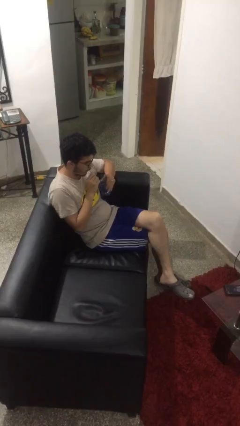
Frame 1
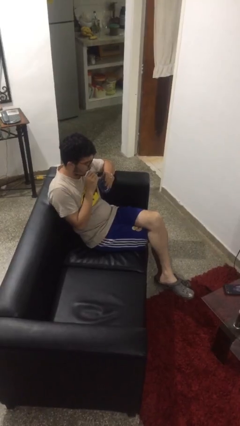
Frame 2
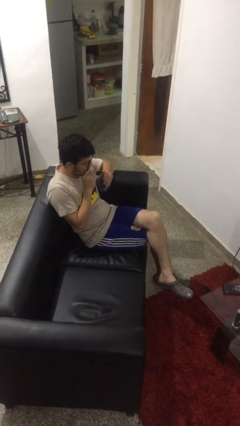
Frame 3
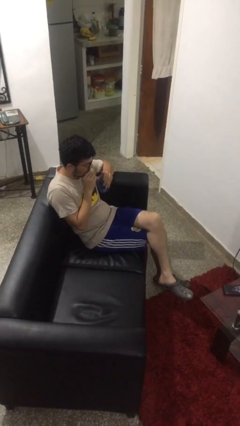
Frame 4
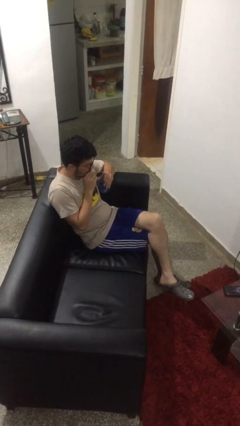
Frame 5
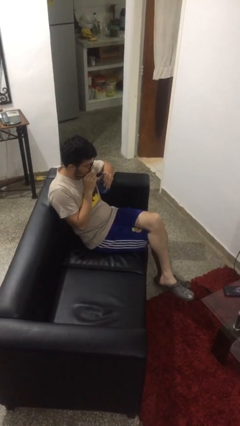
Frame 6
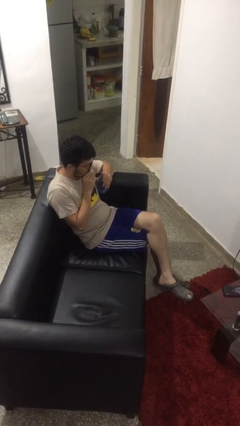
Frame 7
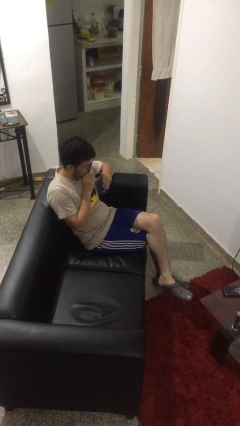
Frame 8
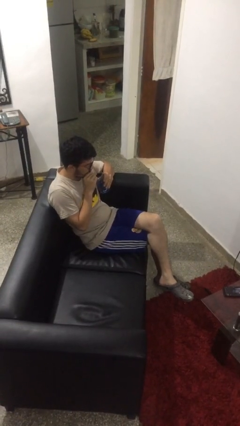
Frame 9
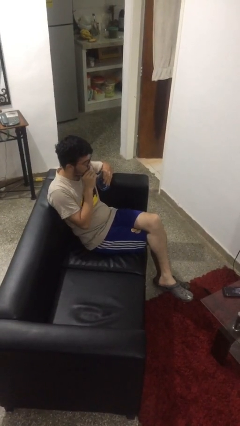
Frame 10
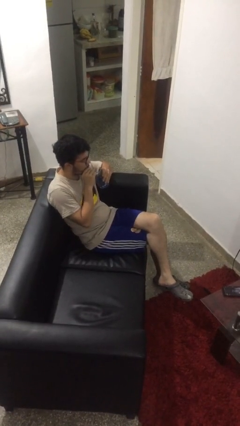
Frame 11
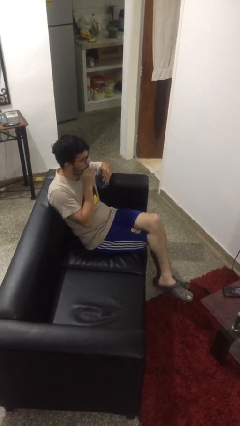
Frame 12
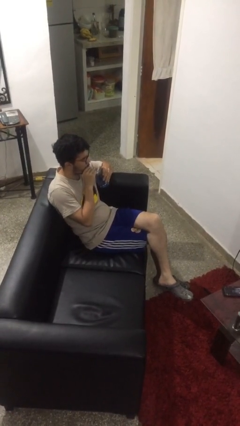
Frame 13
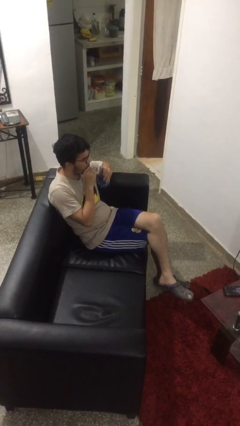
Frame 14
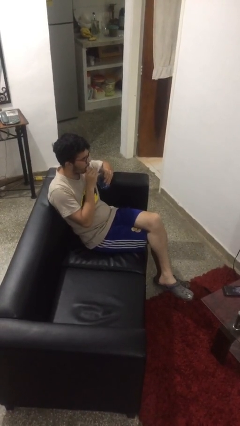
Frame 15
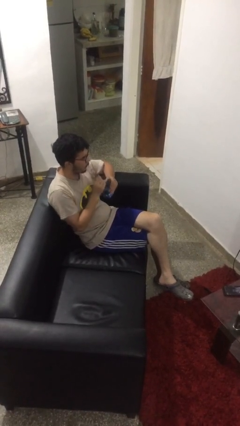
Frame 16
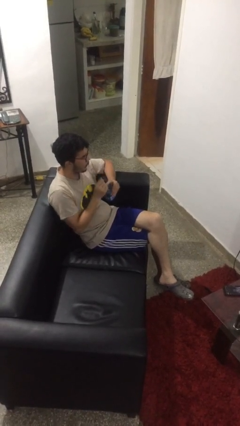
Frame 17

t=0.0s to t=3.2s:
person drinks from straw

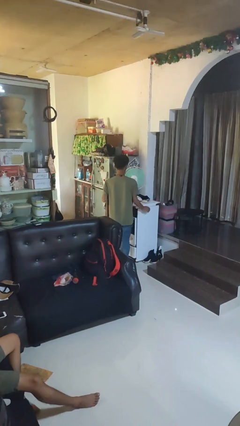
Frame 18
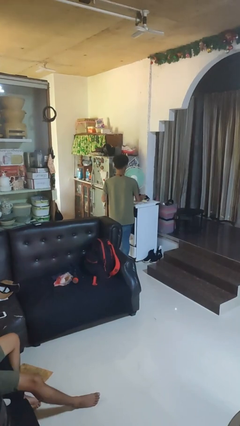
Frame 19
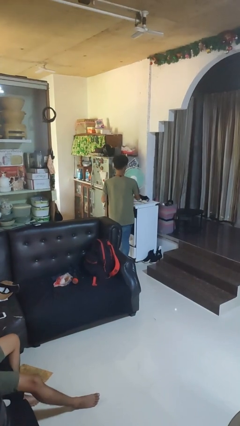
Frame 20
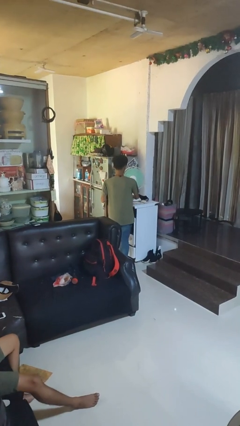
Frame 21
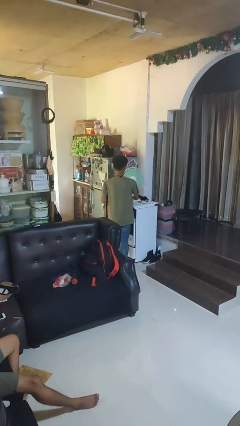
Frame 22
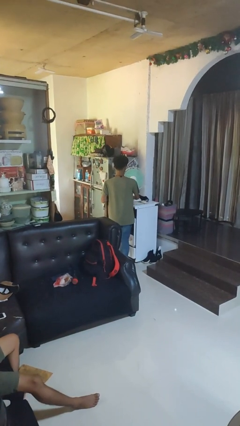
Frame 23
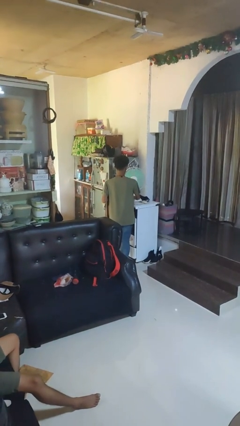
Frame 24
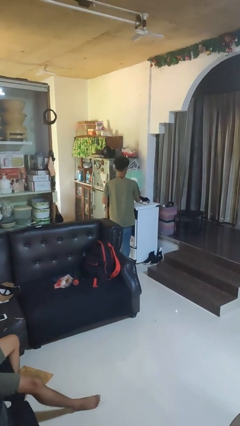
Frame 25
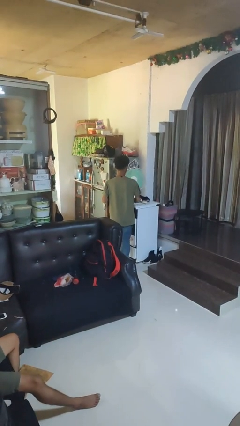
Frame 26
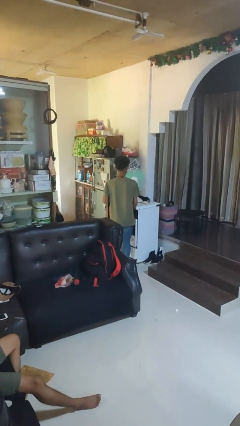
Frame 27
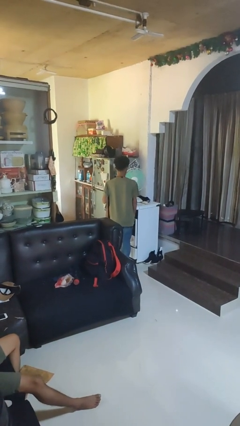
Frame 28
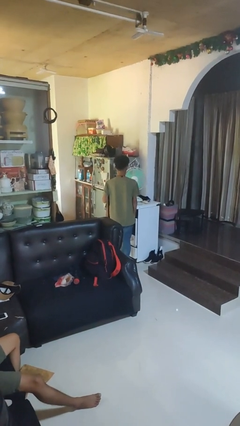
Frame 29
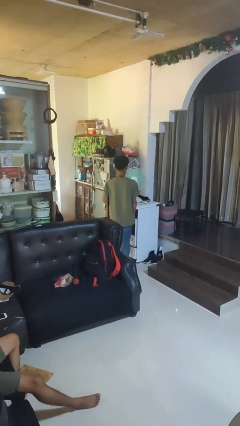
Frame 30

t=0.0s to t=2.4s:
person turns off fan

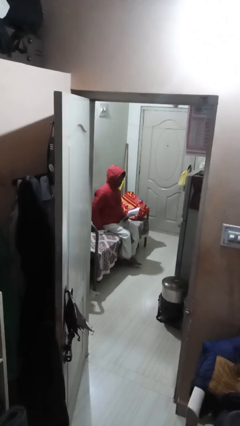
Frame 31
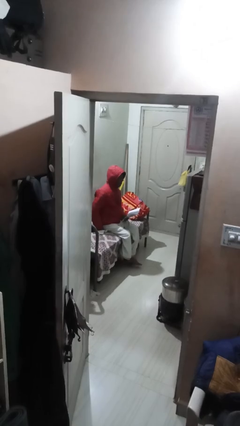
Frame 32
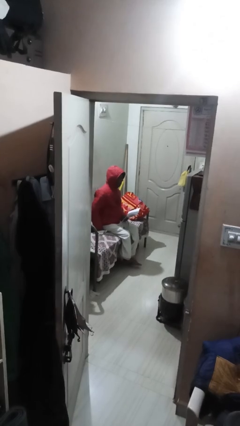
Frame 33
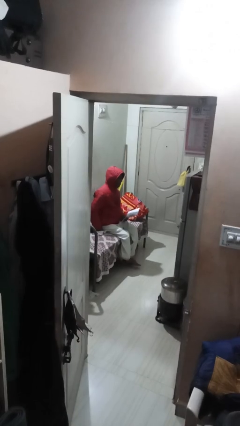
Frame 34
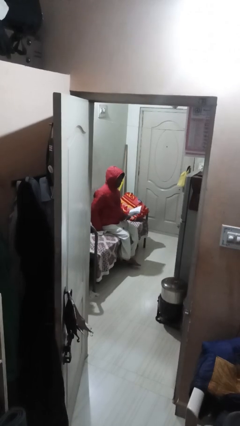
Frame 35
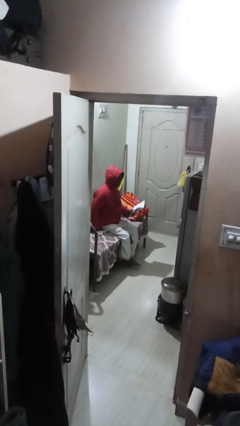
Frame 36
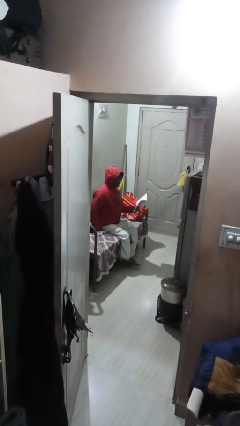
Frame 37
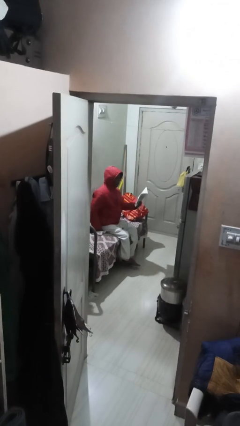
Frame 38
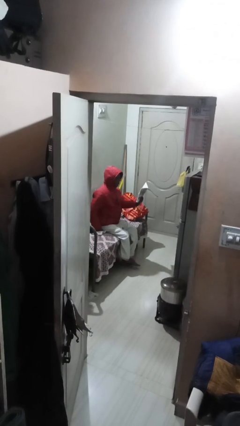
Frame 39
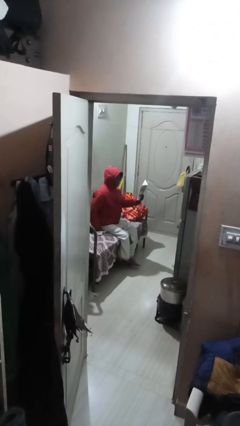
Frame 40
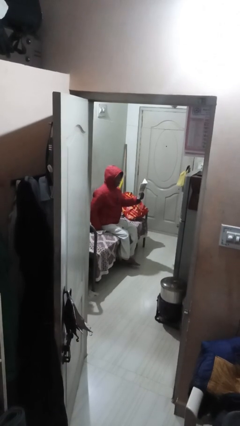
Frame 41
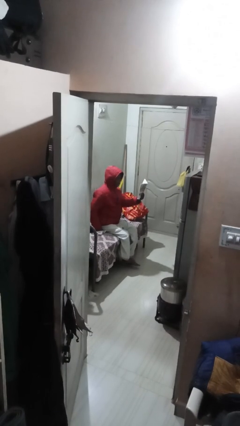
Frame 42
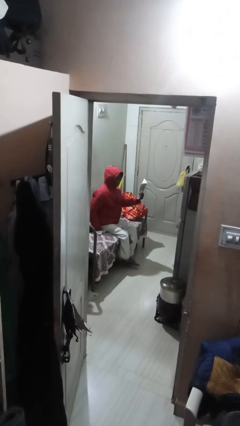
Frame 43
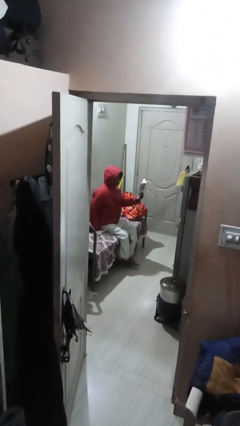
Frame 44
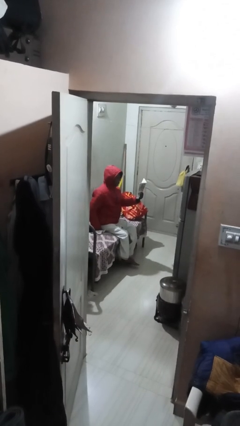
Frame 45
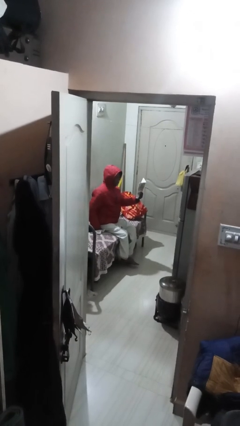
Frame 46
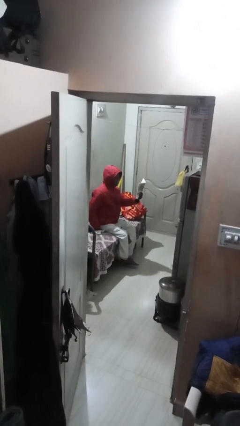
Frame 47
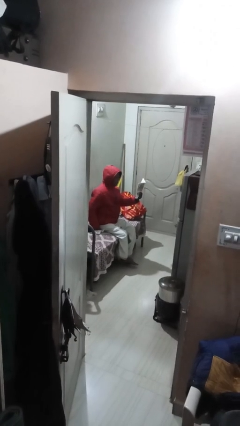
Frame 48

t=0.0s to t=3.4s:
person reads document

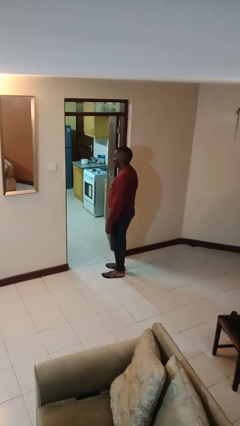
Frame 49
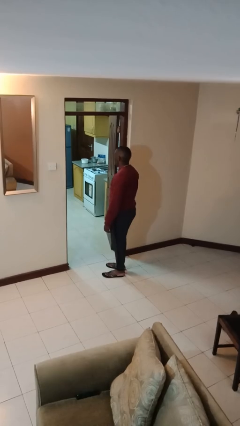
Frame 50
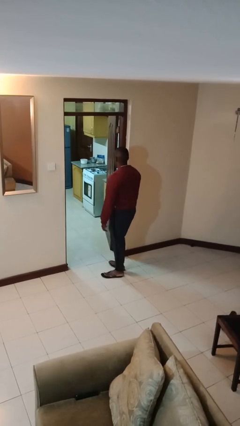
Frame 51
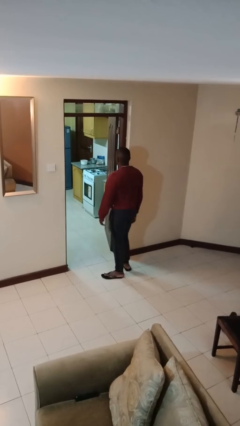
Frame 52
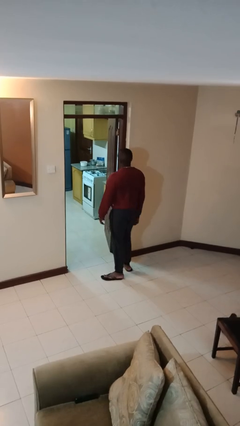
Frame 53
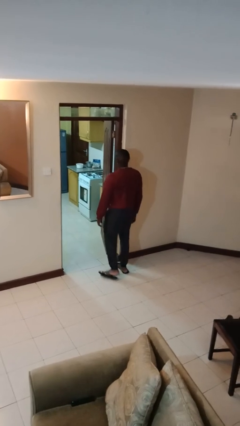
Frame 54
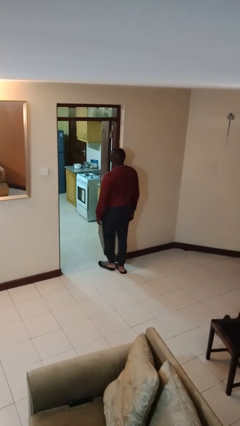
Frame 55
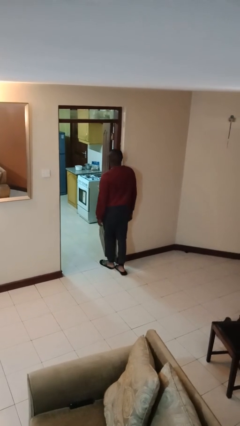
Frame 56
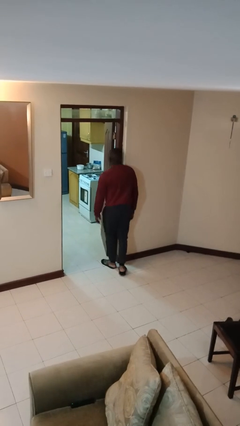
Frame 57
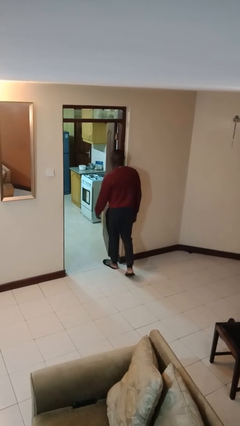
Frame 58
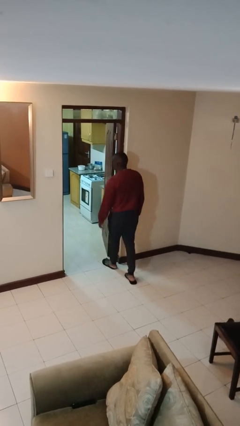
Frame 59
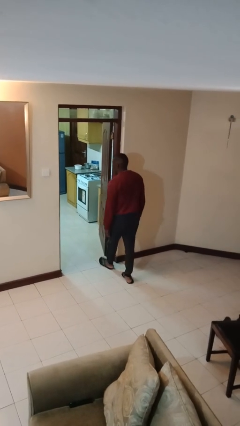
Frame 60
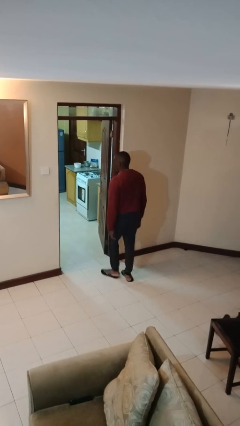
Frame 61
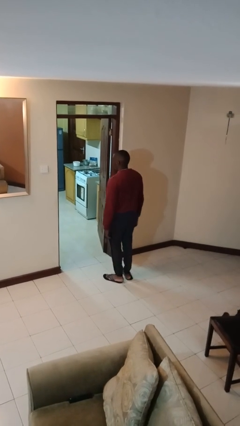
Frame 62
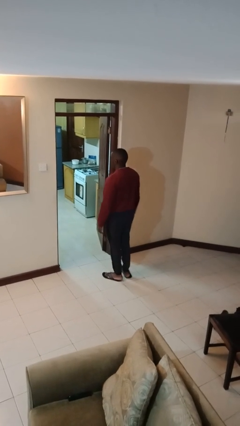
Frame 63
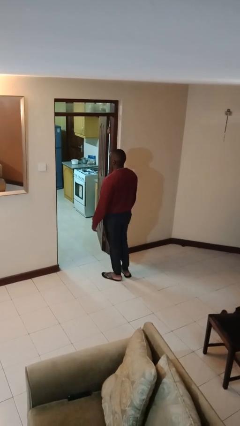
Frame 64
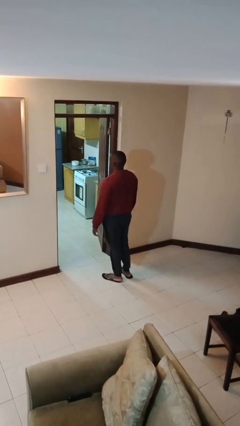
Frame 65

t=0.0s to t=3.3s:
person bumps into wall

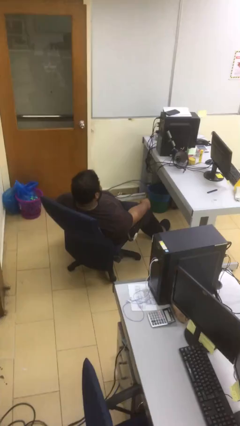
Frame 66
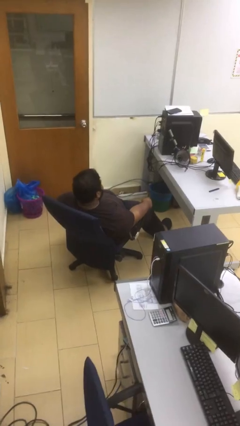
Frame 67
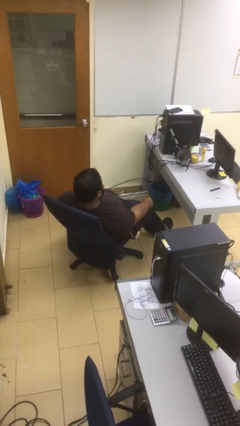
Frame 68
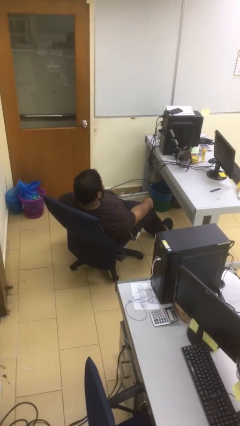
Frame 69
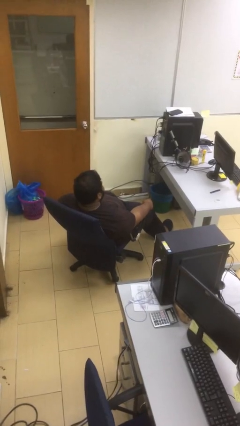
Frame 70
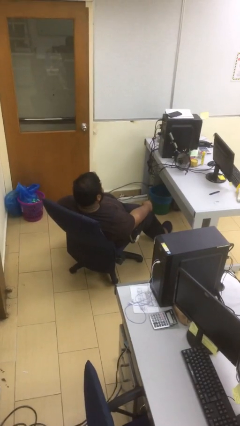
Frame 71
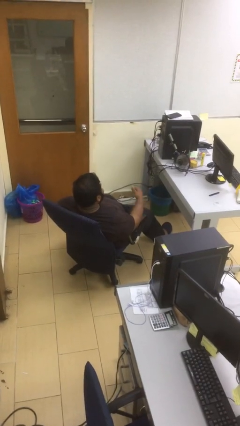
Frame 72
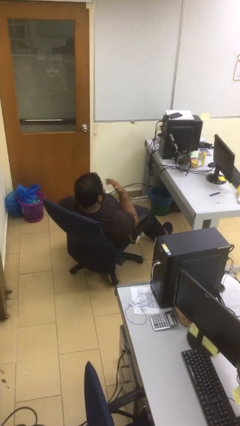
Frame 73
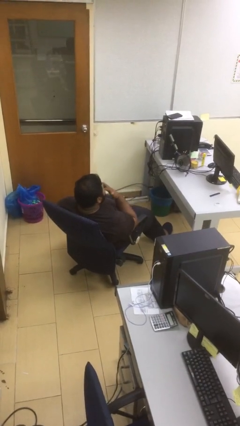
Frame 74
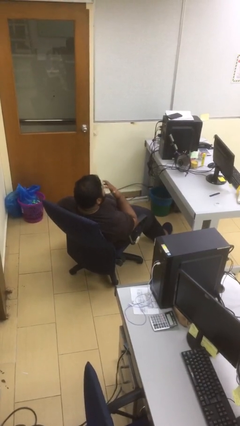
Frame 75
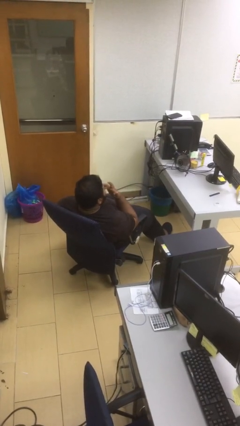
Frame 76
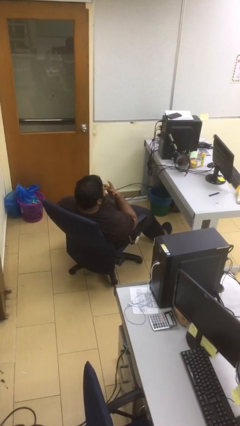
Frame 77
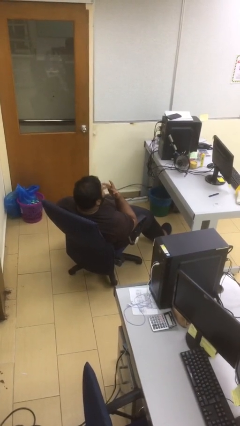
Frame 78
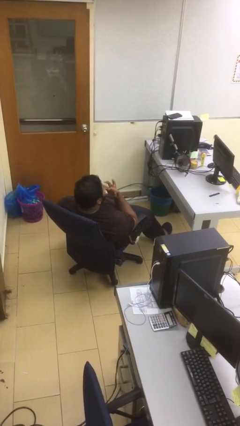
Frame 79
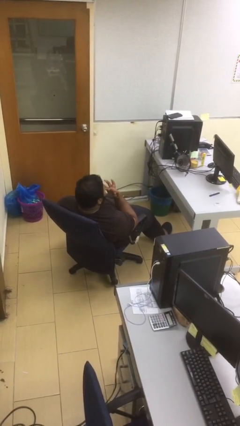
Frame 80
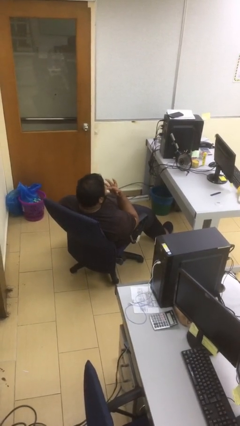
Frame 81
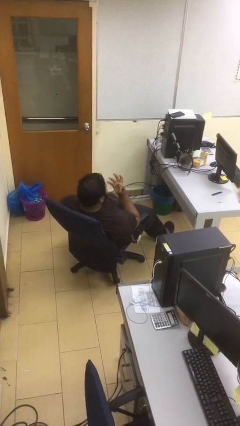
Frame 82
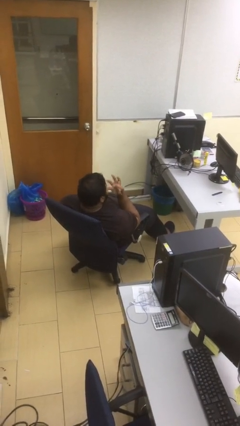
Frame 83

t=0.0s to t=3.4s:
person licks fingers

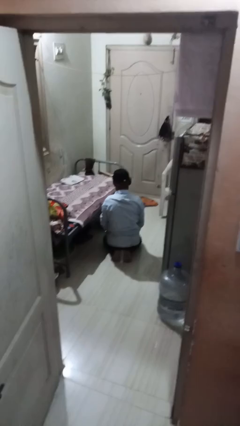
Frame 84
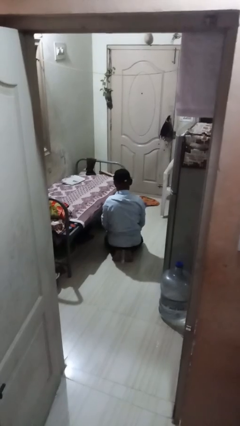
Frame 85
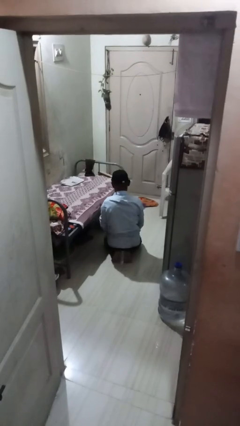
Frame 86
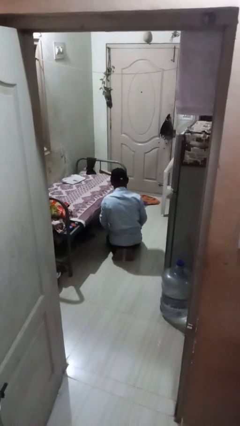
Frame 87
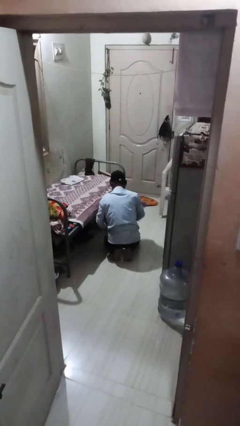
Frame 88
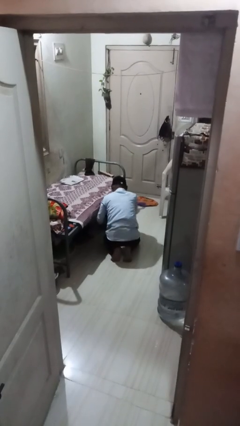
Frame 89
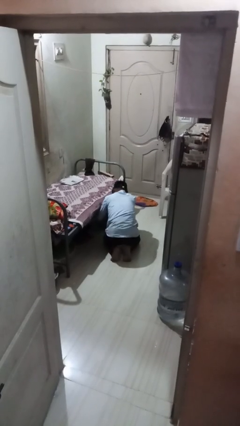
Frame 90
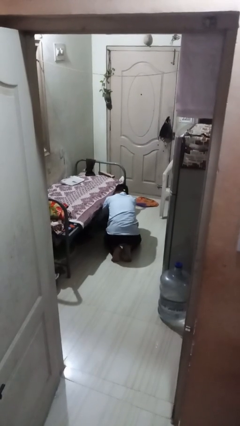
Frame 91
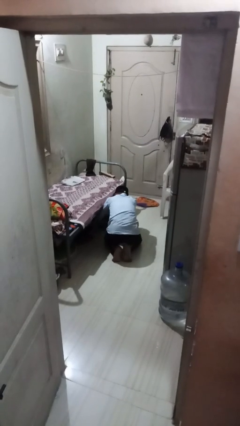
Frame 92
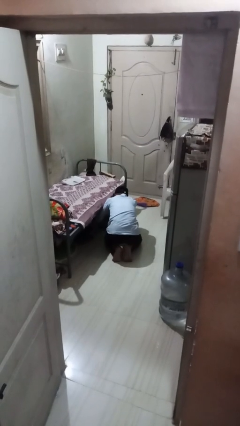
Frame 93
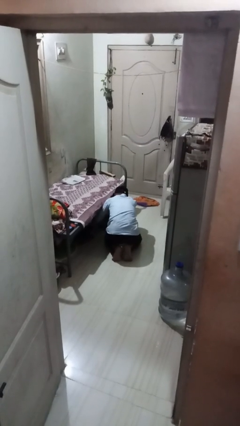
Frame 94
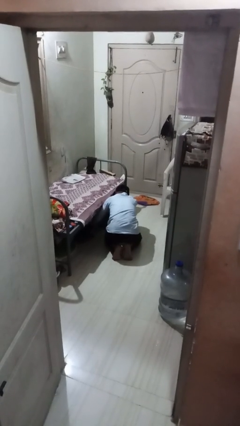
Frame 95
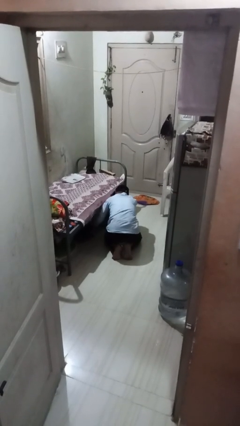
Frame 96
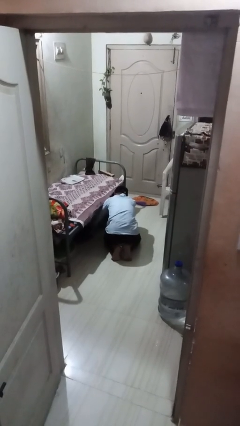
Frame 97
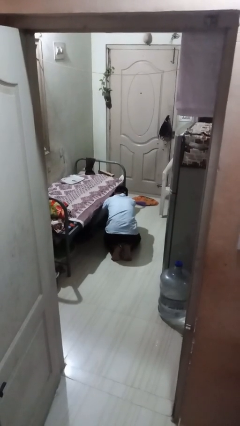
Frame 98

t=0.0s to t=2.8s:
person searches under bed
